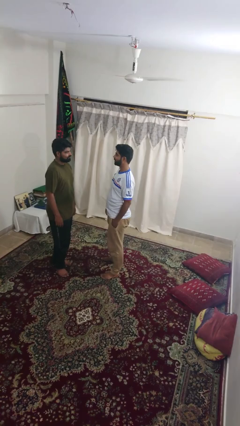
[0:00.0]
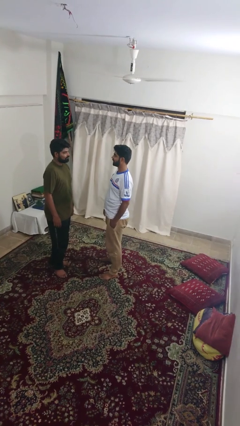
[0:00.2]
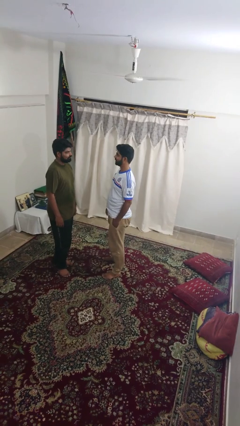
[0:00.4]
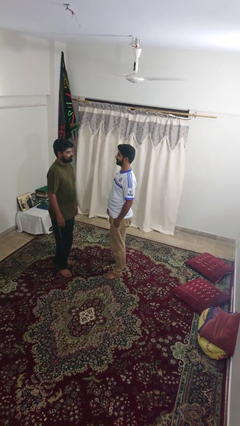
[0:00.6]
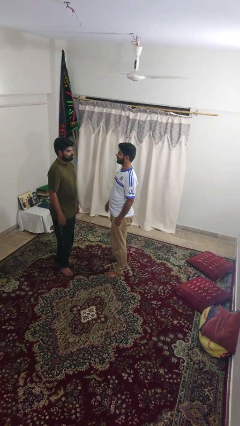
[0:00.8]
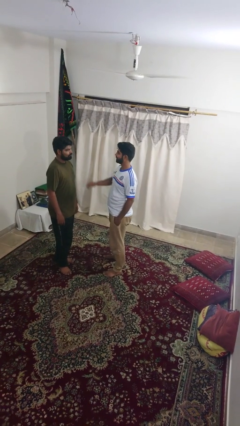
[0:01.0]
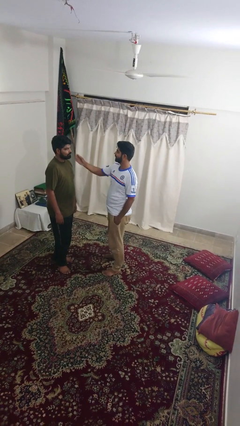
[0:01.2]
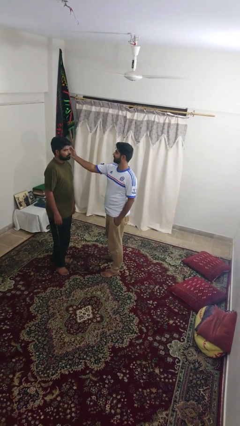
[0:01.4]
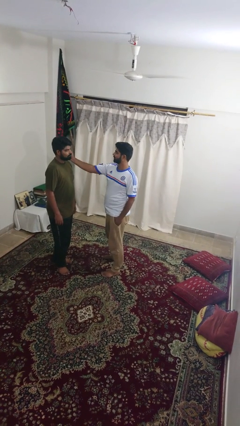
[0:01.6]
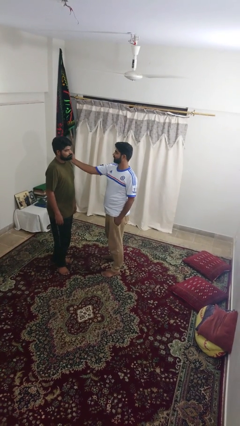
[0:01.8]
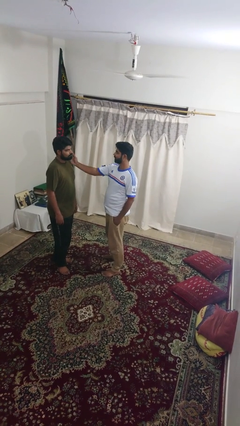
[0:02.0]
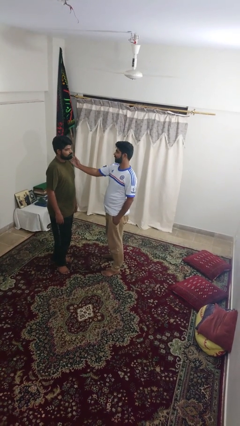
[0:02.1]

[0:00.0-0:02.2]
person touches face of person

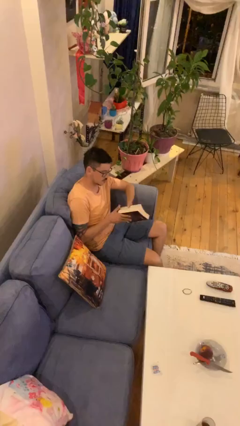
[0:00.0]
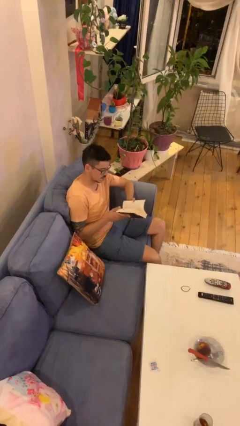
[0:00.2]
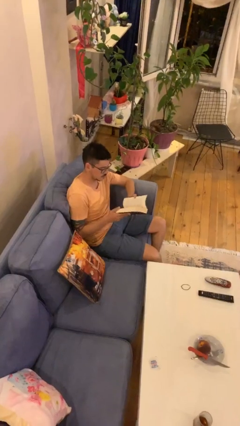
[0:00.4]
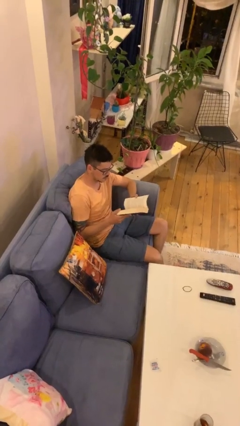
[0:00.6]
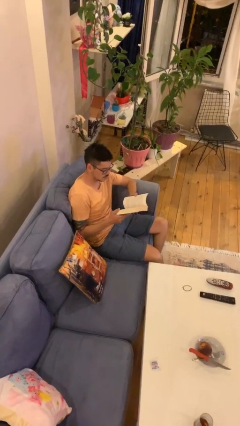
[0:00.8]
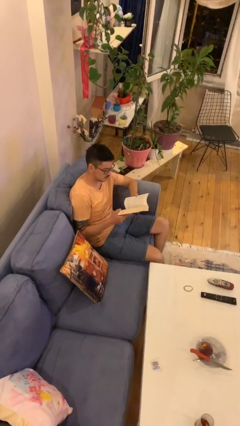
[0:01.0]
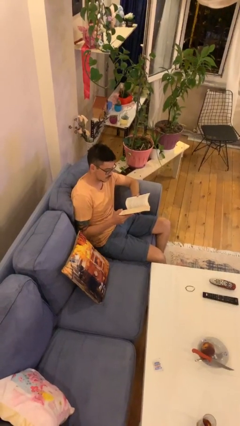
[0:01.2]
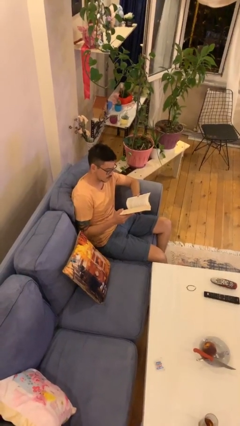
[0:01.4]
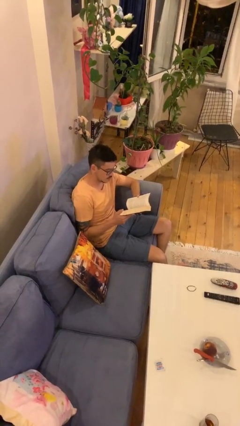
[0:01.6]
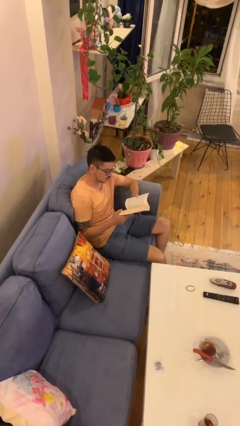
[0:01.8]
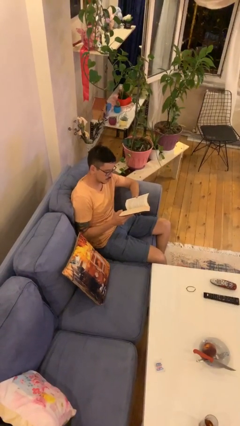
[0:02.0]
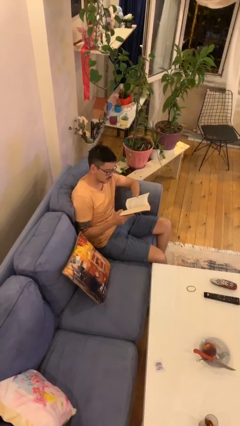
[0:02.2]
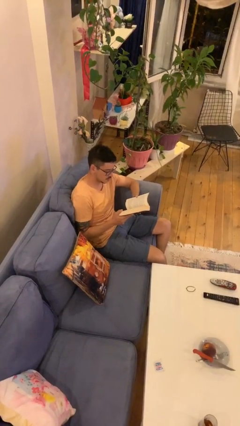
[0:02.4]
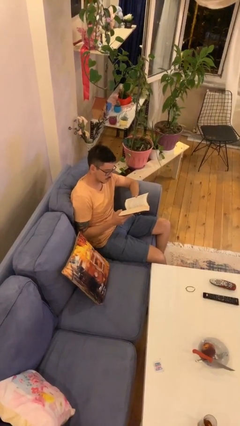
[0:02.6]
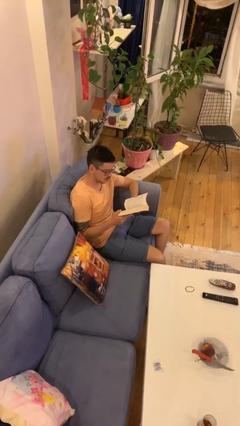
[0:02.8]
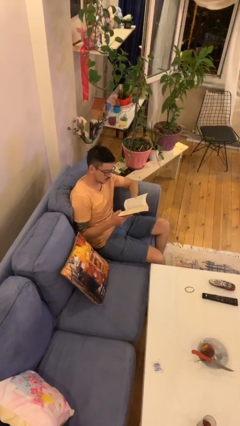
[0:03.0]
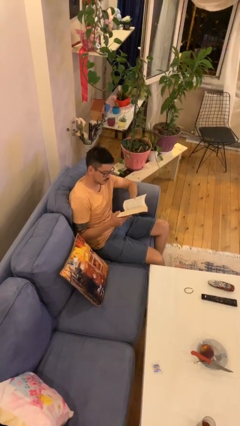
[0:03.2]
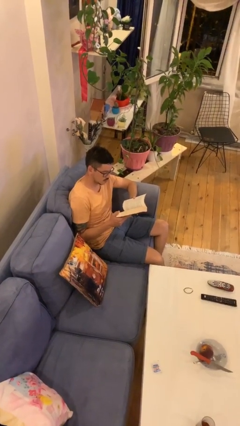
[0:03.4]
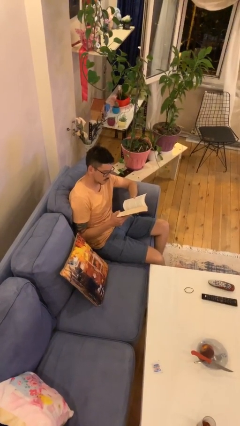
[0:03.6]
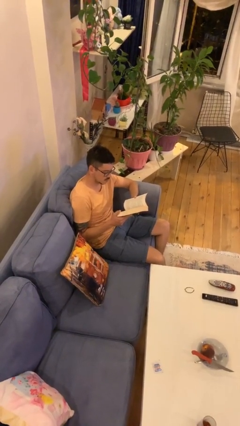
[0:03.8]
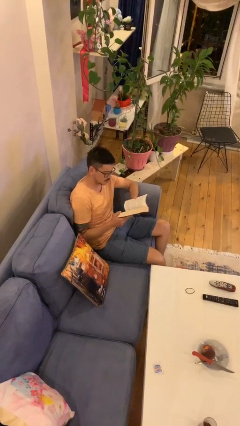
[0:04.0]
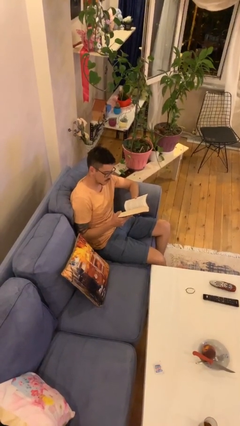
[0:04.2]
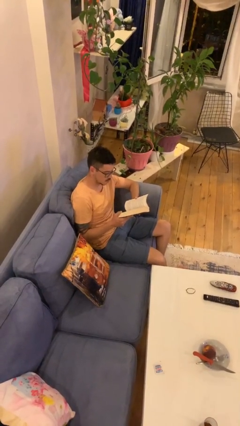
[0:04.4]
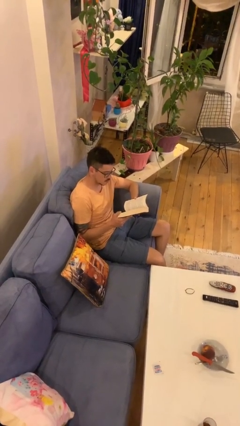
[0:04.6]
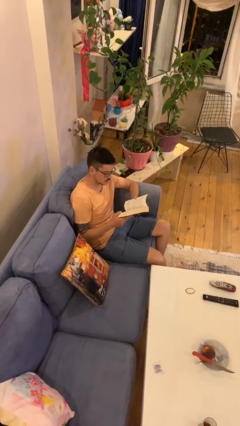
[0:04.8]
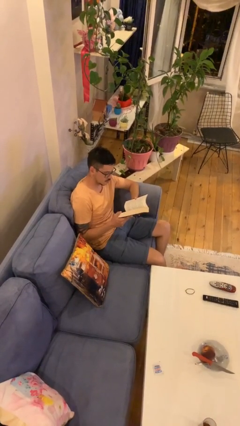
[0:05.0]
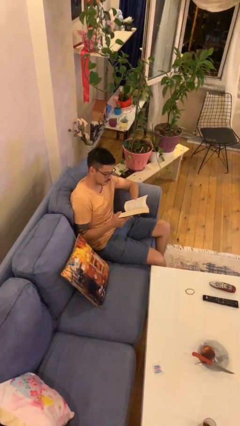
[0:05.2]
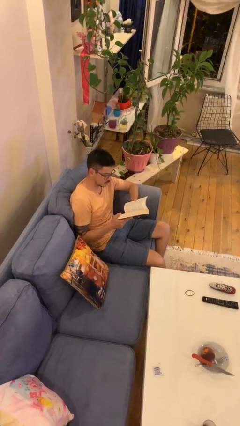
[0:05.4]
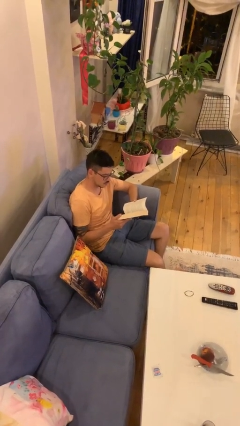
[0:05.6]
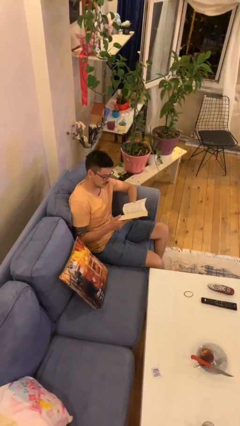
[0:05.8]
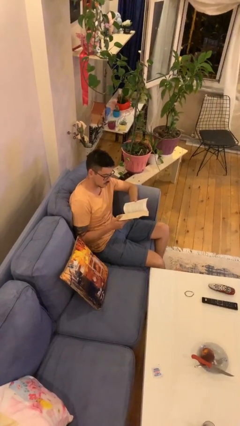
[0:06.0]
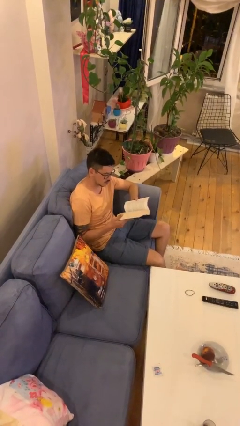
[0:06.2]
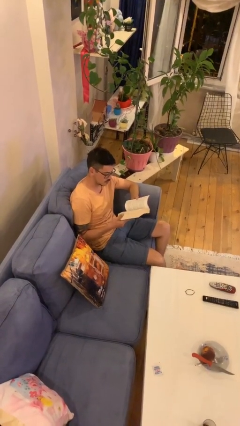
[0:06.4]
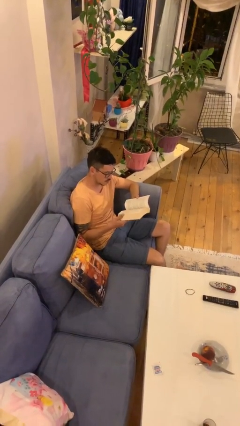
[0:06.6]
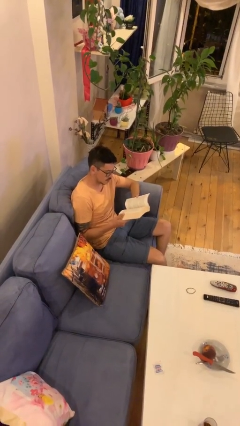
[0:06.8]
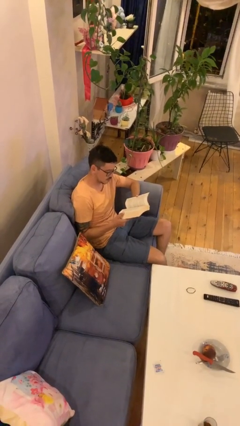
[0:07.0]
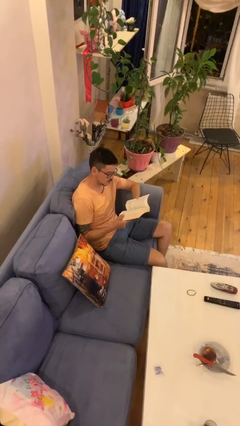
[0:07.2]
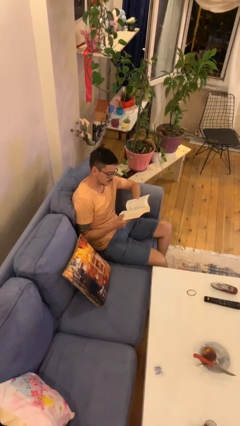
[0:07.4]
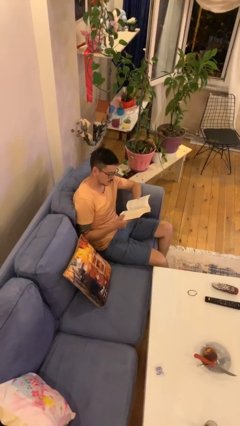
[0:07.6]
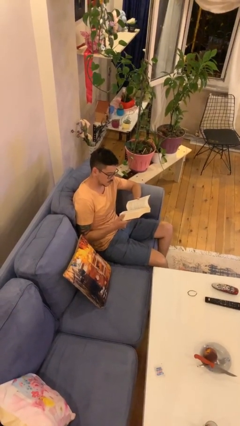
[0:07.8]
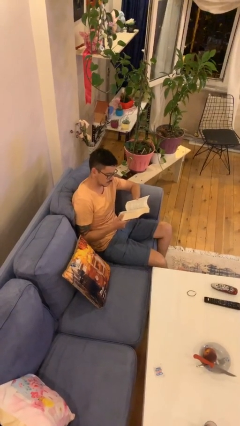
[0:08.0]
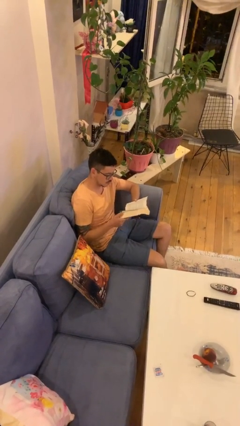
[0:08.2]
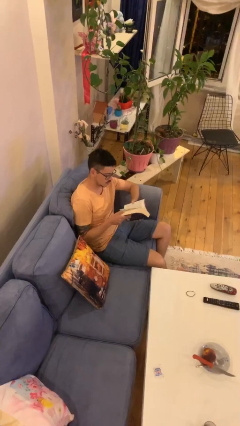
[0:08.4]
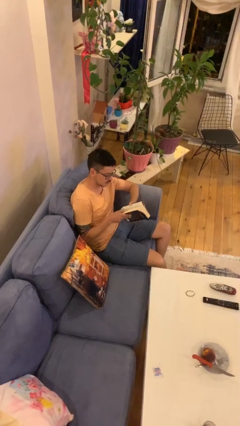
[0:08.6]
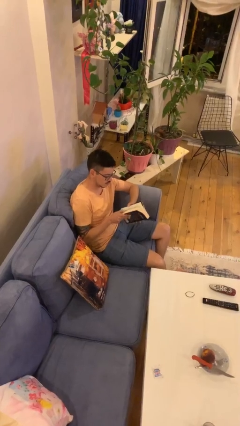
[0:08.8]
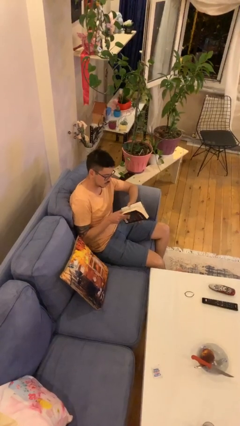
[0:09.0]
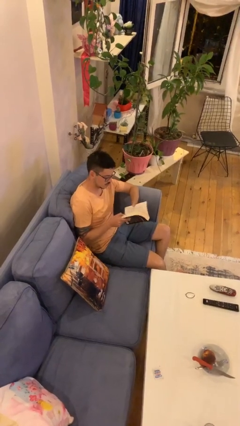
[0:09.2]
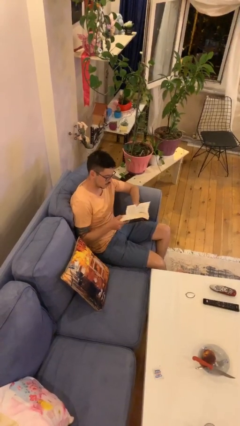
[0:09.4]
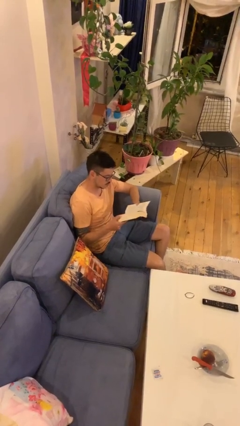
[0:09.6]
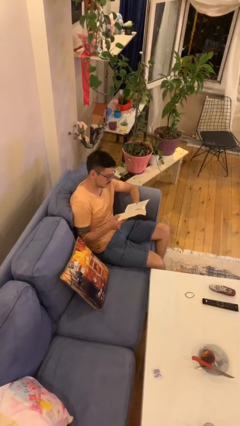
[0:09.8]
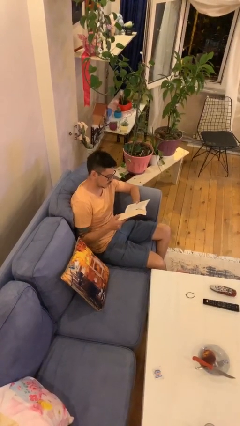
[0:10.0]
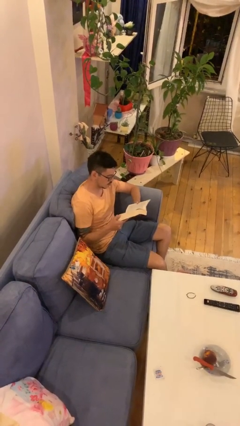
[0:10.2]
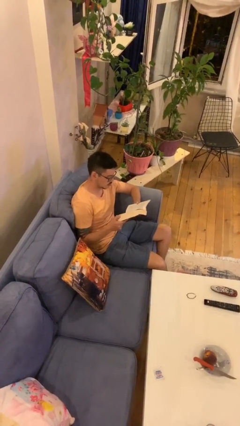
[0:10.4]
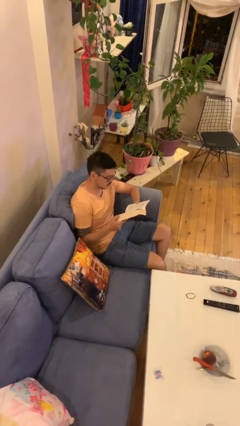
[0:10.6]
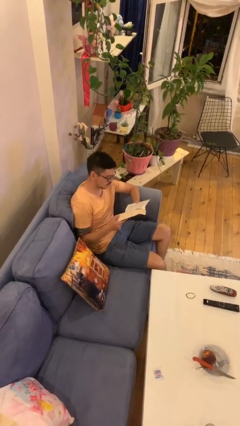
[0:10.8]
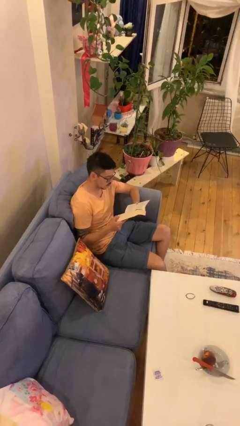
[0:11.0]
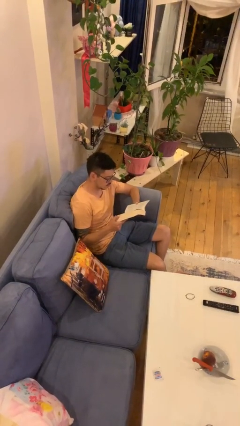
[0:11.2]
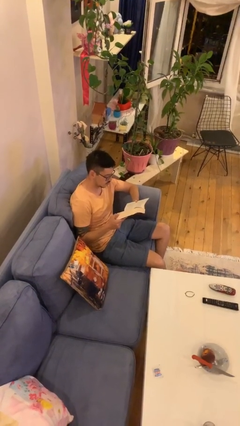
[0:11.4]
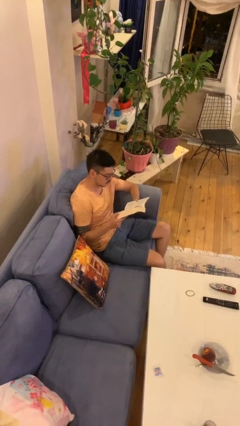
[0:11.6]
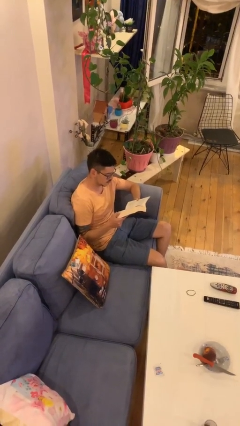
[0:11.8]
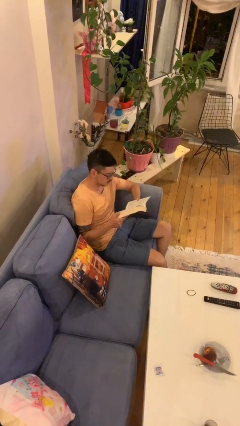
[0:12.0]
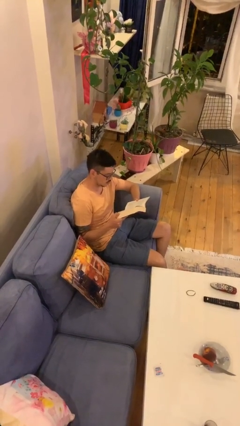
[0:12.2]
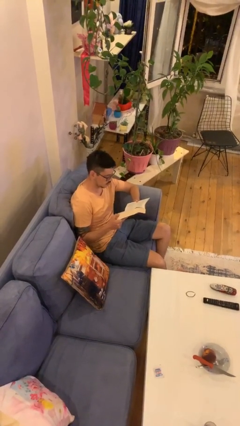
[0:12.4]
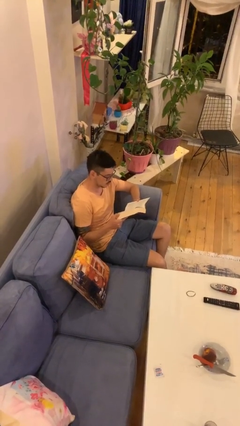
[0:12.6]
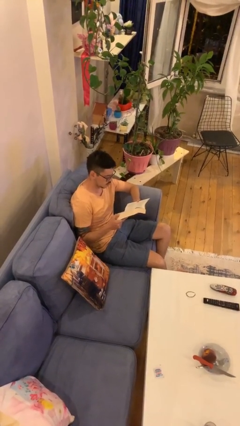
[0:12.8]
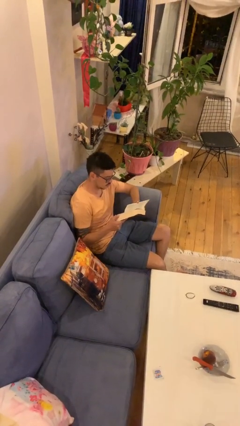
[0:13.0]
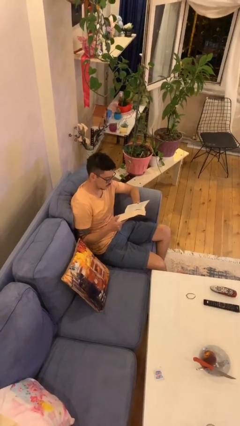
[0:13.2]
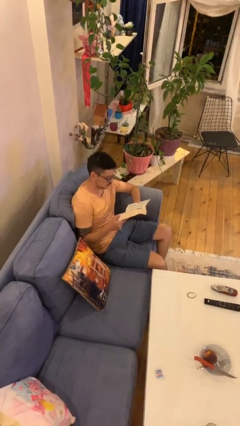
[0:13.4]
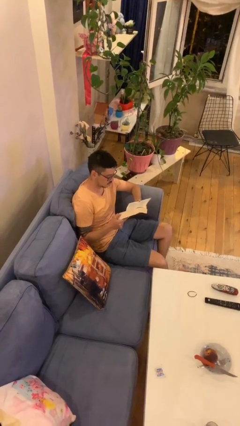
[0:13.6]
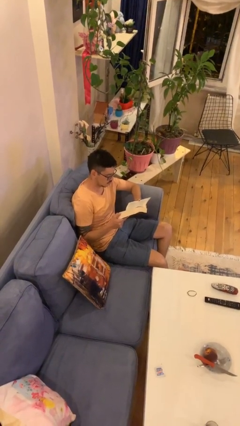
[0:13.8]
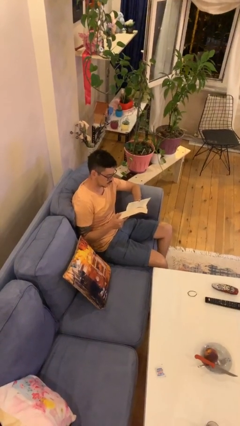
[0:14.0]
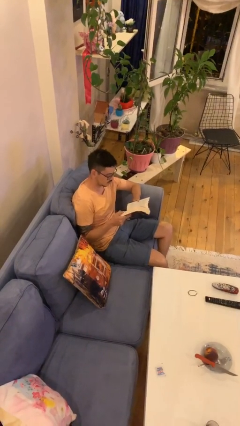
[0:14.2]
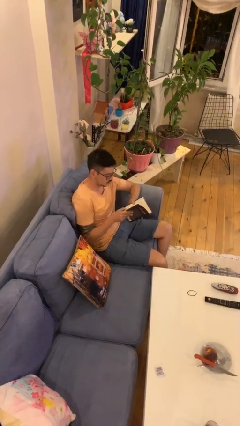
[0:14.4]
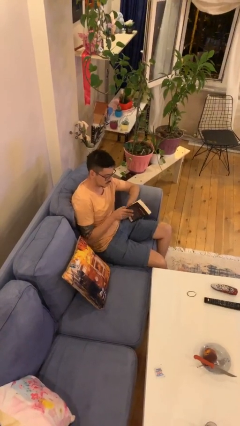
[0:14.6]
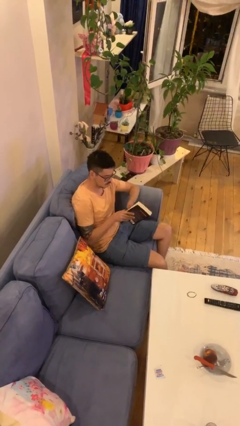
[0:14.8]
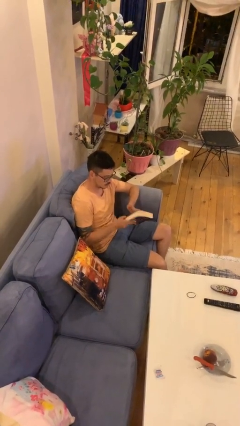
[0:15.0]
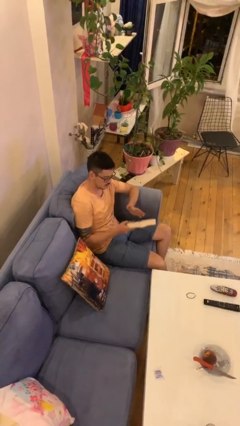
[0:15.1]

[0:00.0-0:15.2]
person reads document

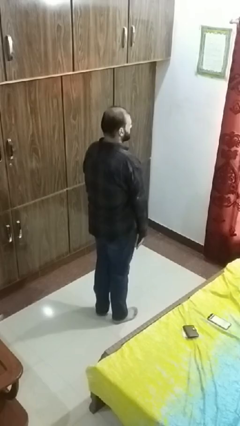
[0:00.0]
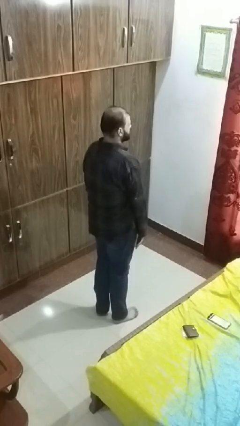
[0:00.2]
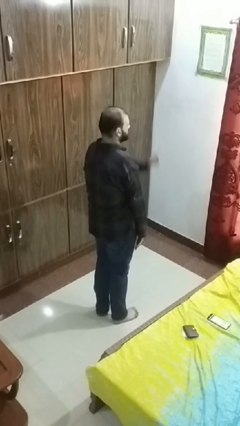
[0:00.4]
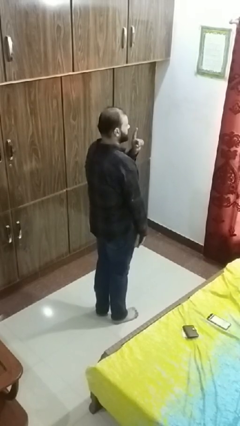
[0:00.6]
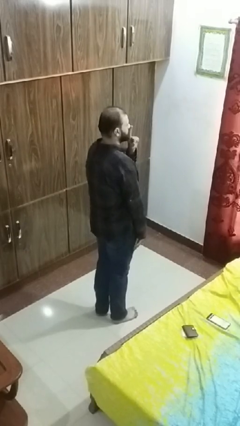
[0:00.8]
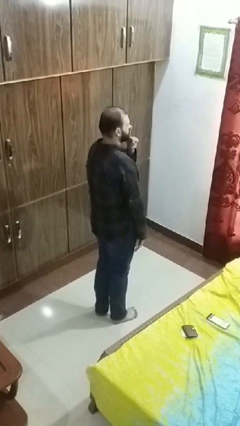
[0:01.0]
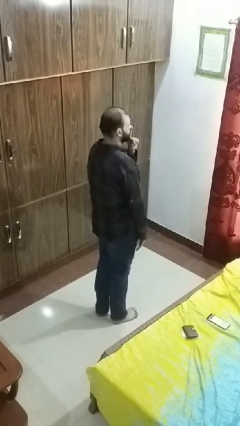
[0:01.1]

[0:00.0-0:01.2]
person gestures be quiet
